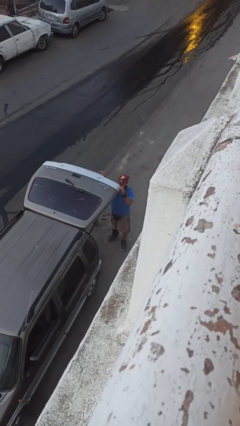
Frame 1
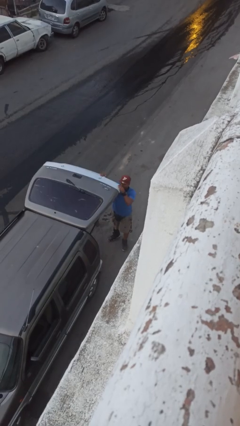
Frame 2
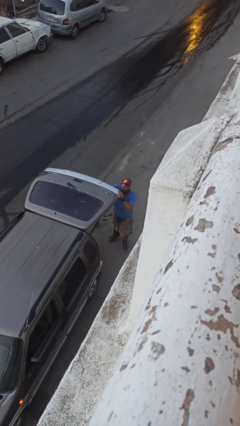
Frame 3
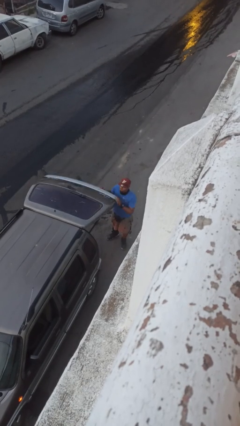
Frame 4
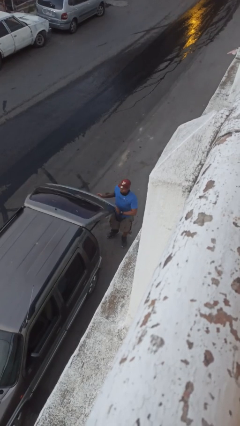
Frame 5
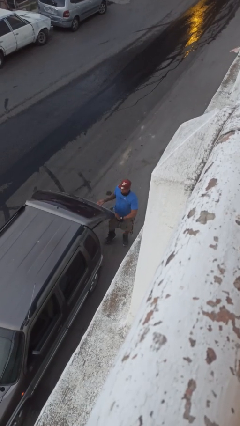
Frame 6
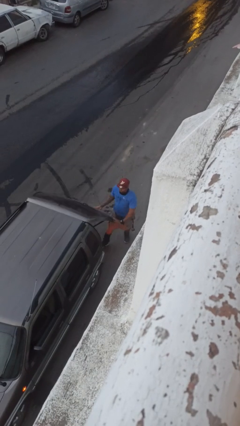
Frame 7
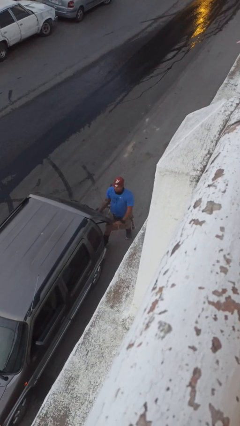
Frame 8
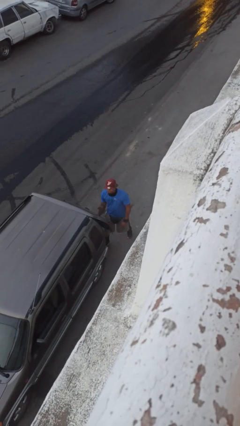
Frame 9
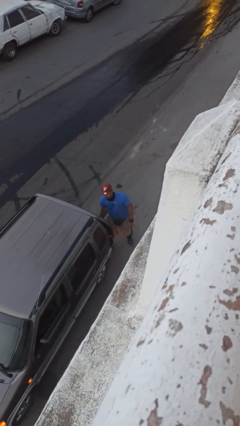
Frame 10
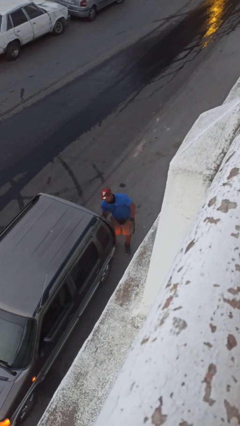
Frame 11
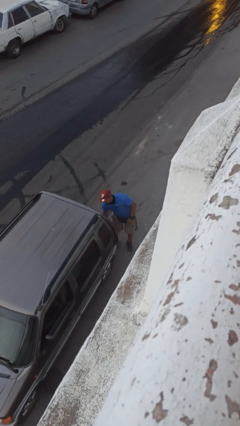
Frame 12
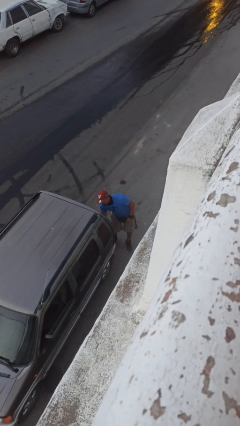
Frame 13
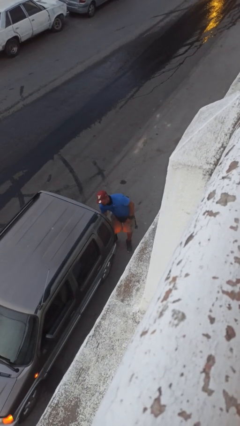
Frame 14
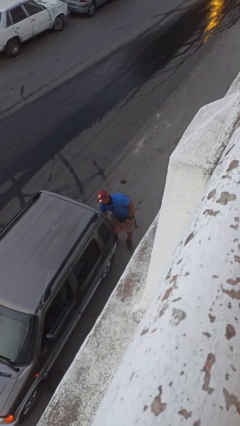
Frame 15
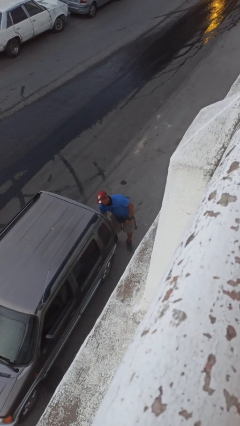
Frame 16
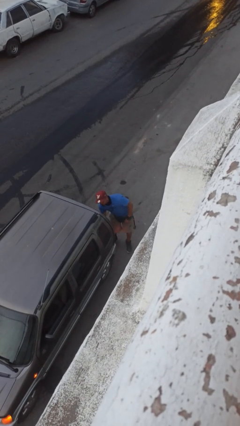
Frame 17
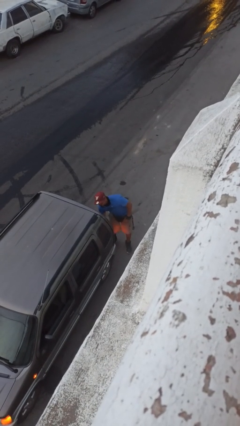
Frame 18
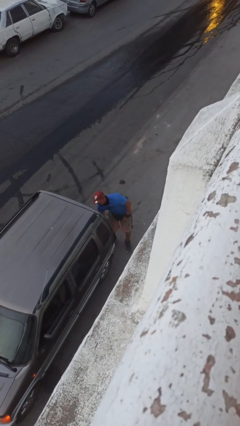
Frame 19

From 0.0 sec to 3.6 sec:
person closes car trunk

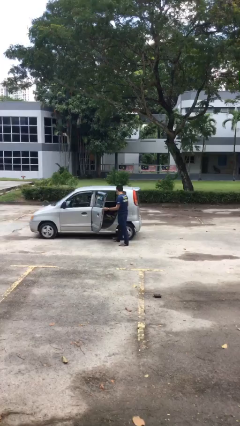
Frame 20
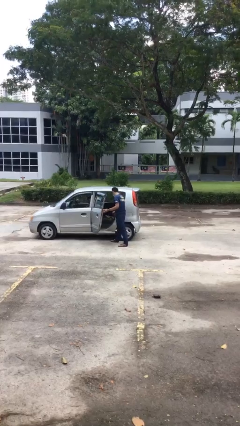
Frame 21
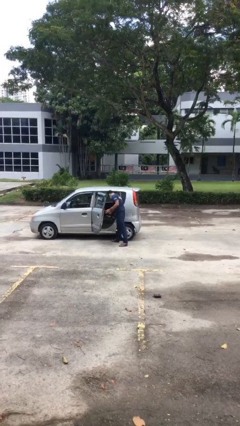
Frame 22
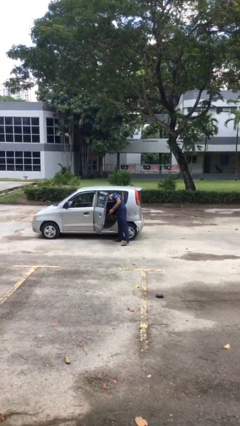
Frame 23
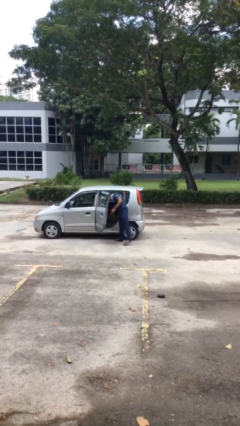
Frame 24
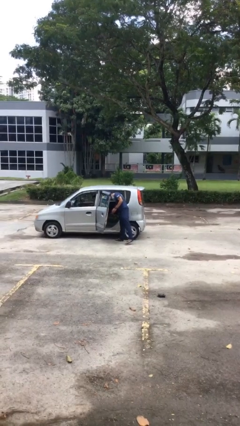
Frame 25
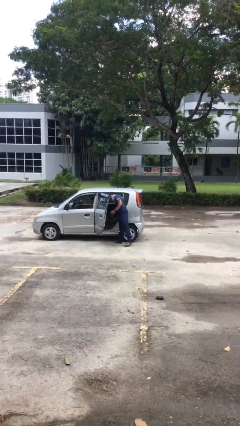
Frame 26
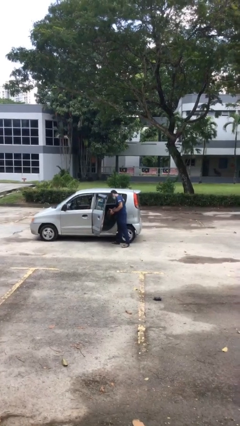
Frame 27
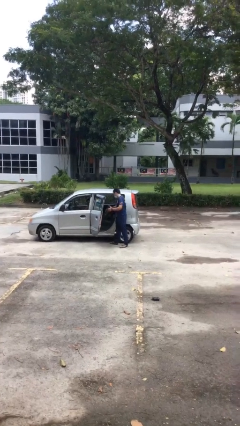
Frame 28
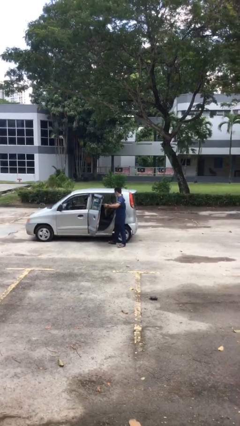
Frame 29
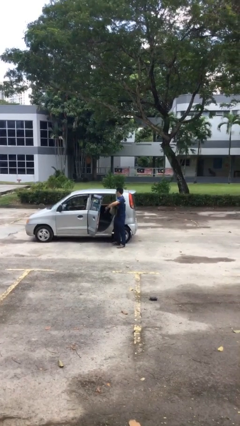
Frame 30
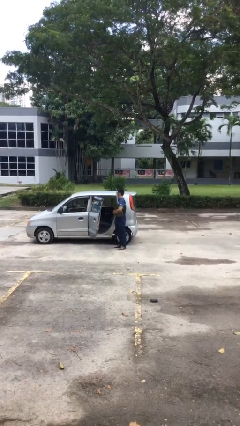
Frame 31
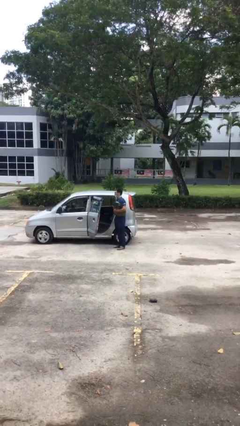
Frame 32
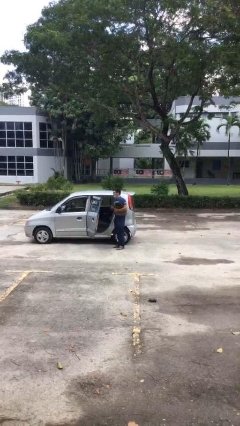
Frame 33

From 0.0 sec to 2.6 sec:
person unloads car

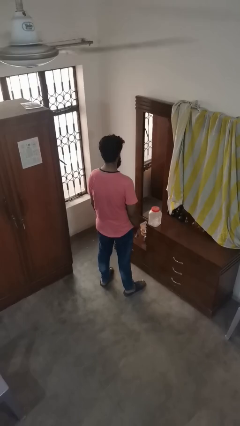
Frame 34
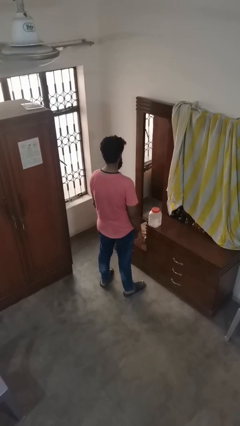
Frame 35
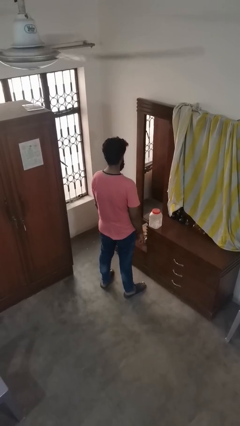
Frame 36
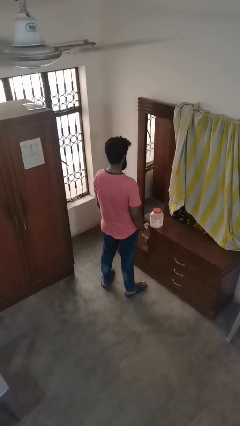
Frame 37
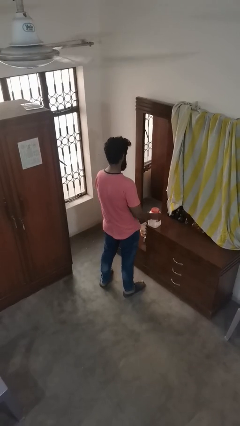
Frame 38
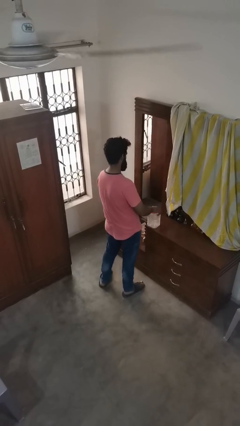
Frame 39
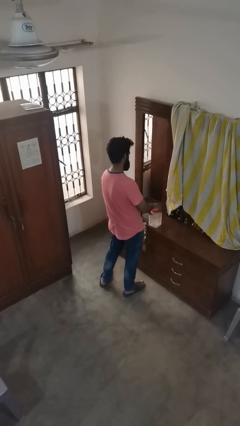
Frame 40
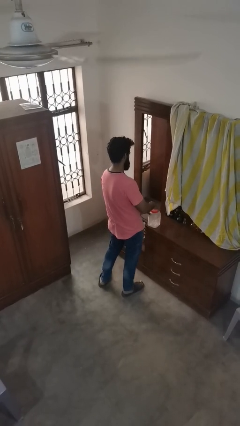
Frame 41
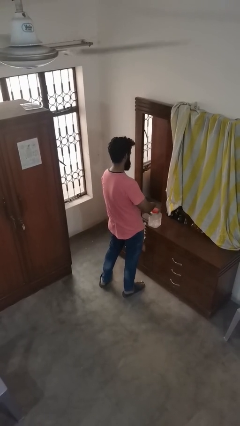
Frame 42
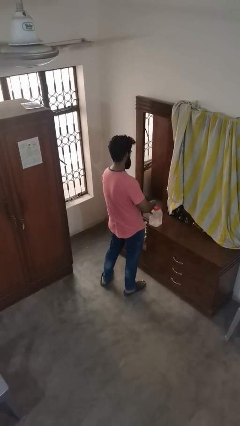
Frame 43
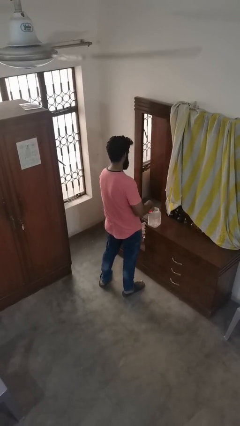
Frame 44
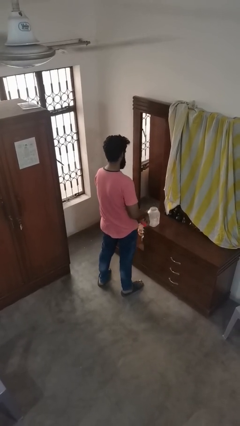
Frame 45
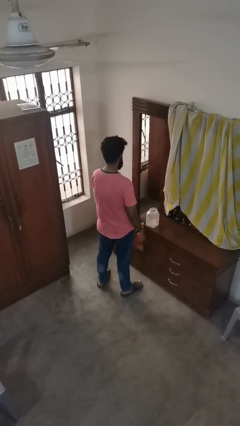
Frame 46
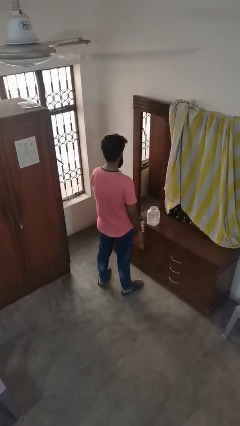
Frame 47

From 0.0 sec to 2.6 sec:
person opens jar

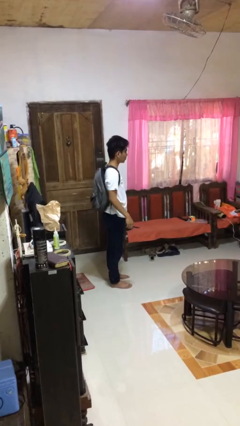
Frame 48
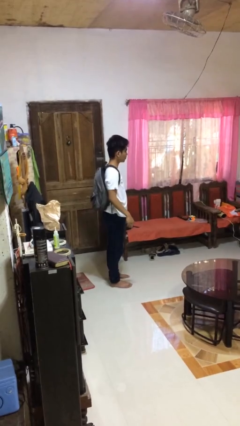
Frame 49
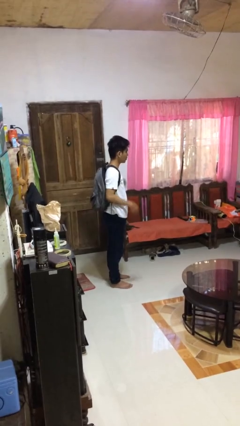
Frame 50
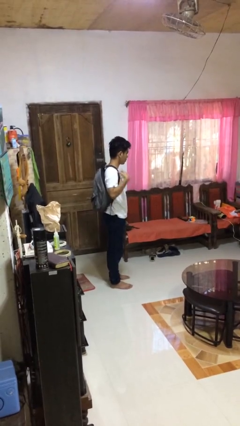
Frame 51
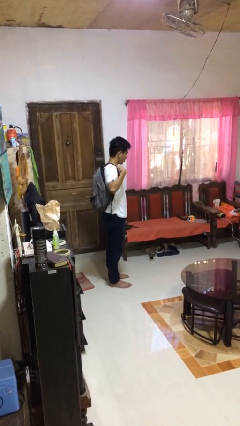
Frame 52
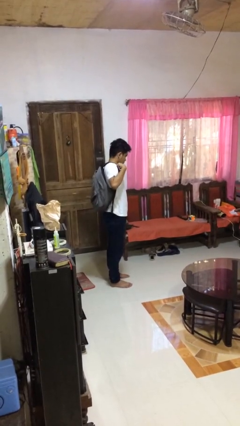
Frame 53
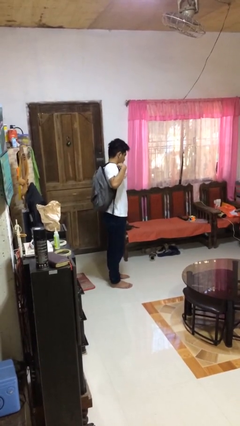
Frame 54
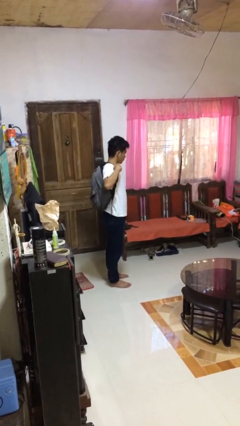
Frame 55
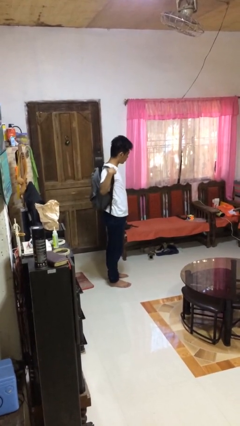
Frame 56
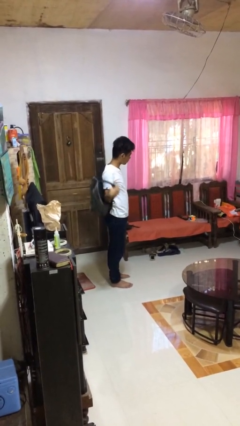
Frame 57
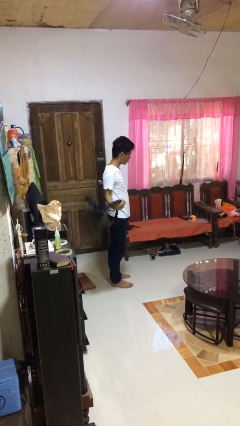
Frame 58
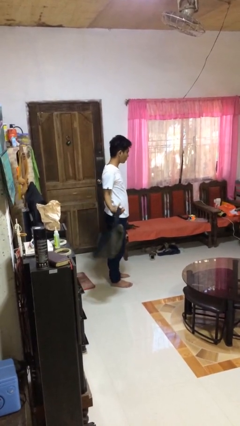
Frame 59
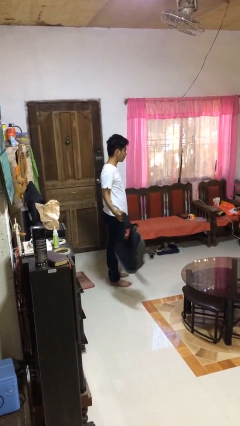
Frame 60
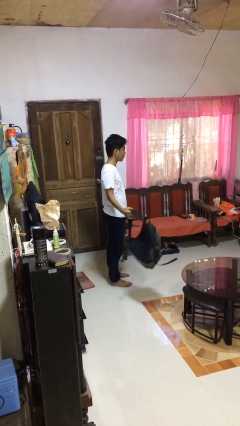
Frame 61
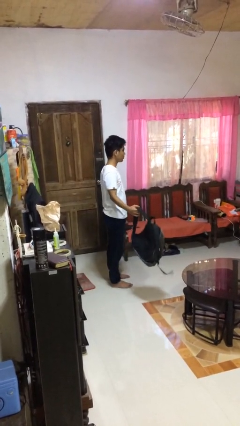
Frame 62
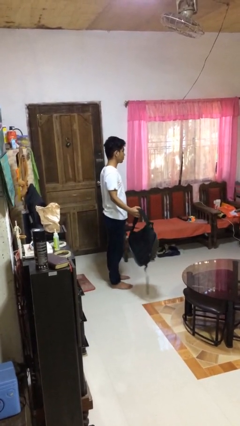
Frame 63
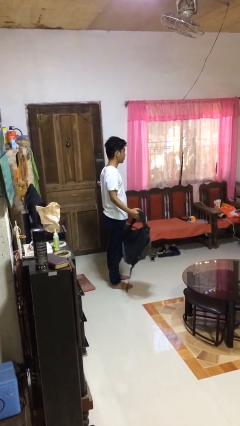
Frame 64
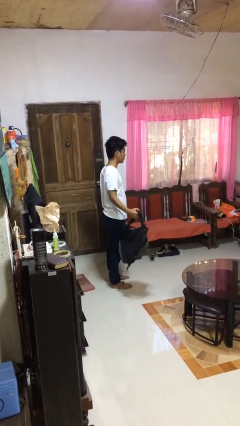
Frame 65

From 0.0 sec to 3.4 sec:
person takes off backpack

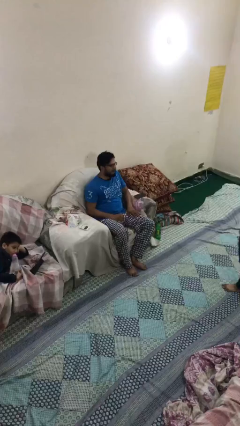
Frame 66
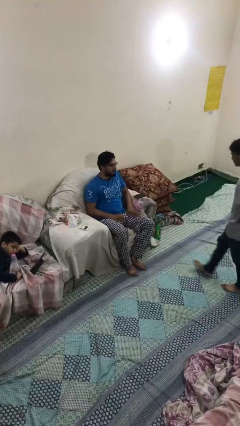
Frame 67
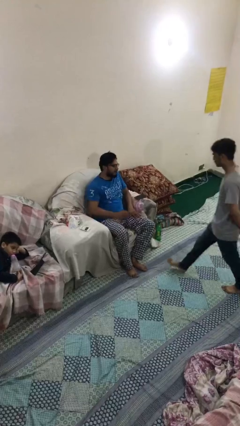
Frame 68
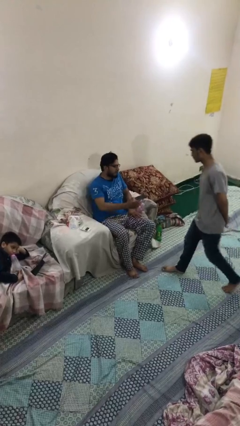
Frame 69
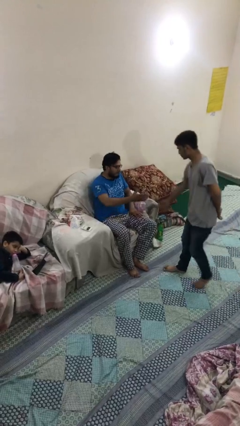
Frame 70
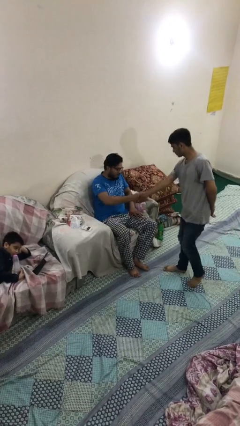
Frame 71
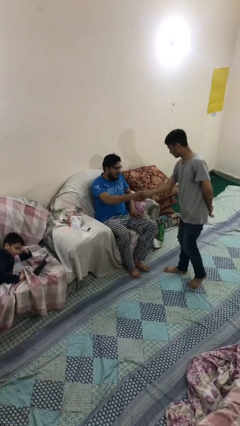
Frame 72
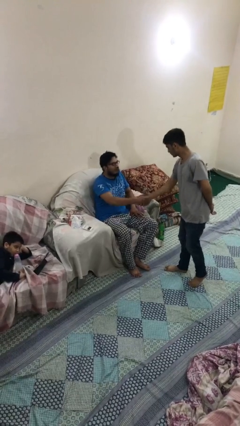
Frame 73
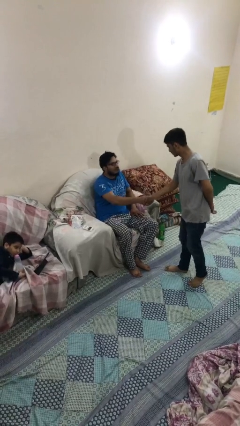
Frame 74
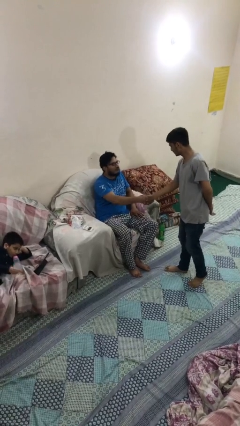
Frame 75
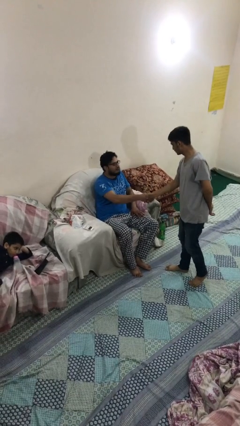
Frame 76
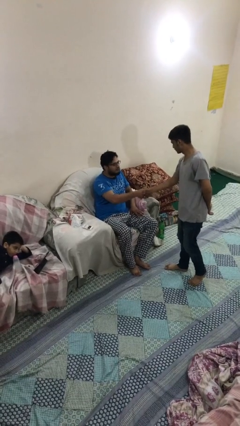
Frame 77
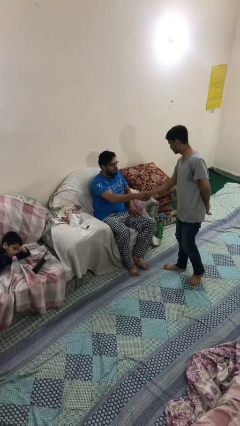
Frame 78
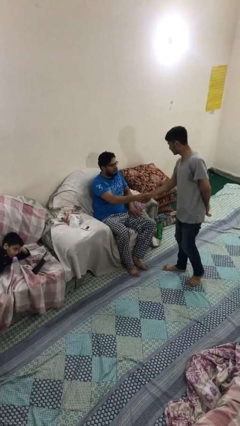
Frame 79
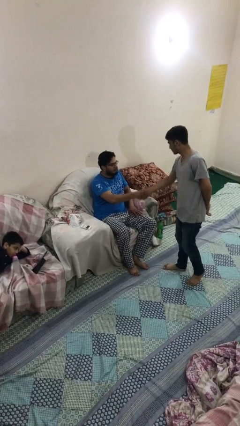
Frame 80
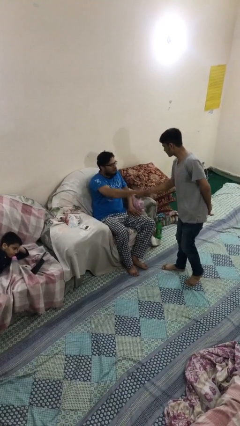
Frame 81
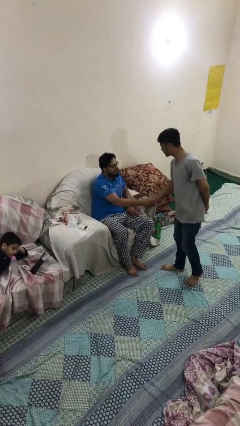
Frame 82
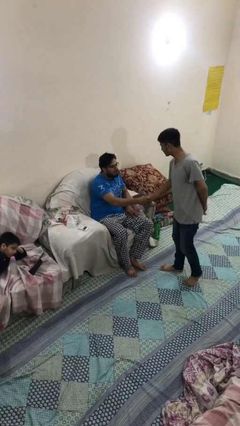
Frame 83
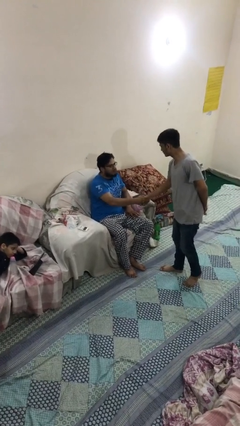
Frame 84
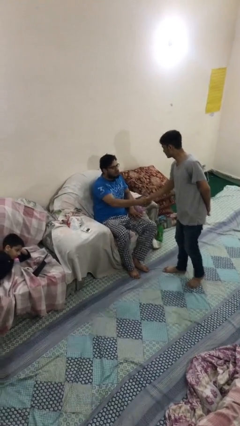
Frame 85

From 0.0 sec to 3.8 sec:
person shakes hand

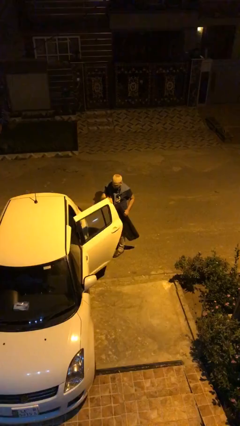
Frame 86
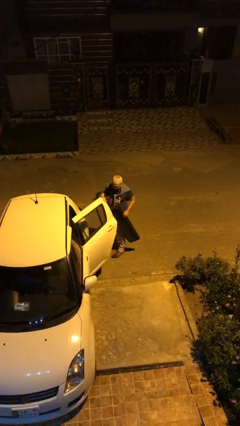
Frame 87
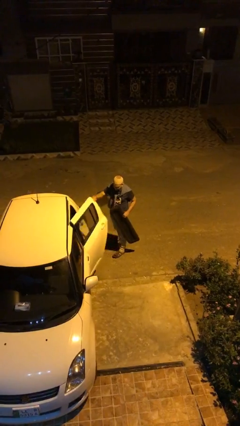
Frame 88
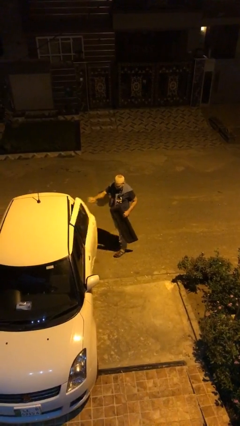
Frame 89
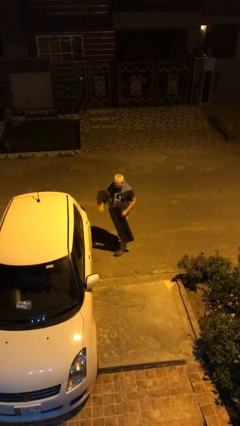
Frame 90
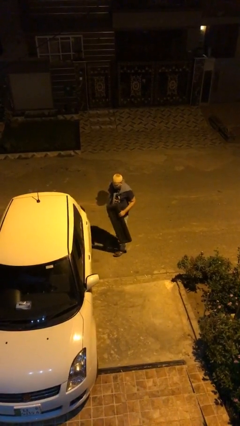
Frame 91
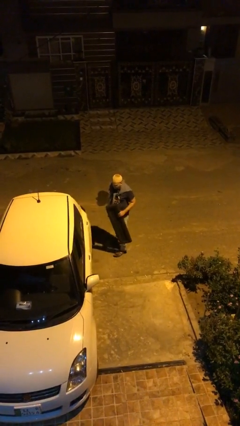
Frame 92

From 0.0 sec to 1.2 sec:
person closes car door
